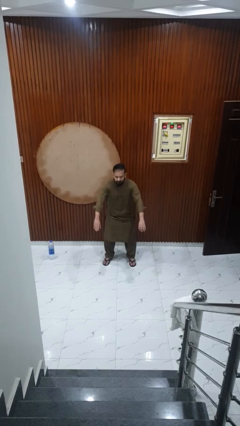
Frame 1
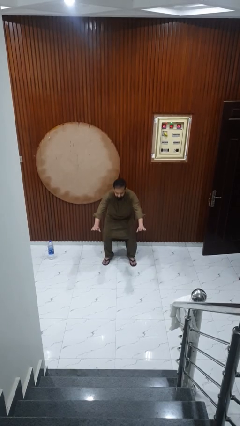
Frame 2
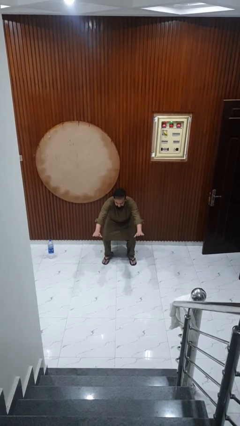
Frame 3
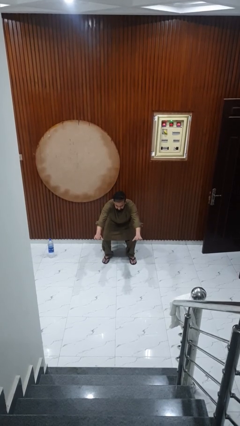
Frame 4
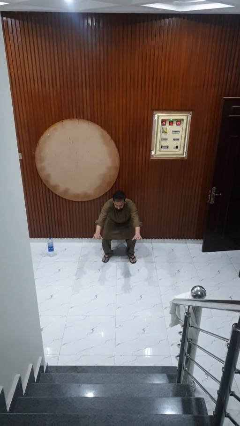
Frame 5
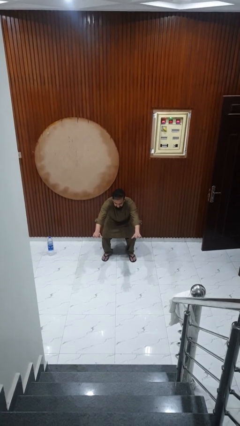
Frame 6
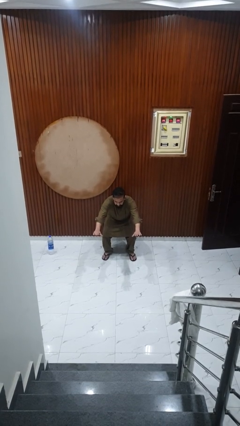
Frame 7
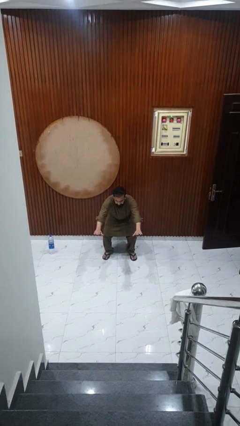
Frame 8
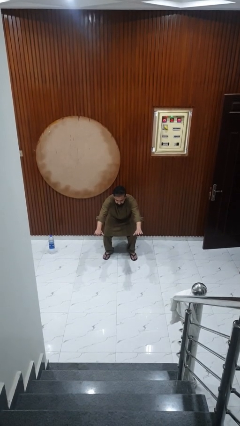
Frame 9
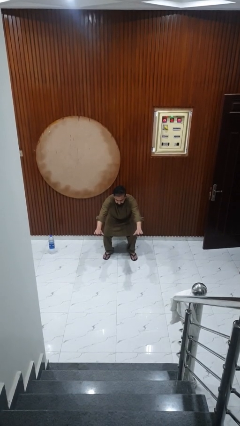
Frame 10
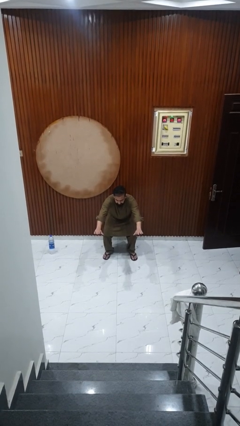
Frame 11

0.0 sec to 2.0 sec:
person squats

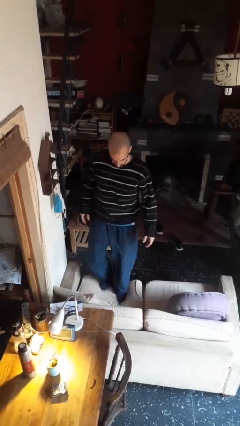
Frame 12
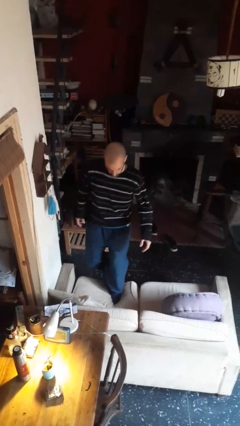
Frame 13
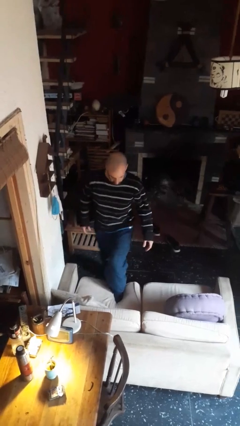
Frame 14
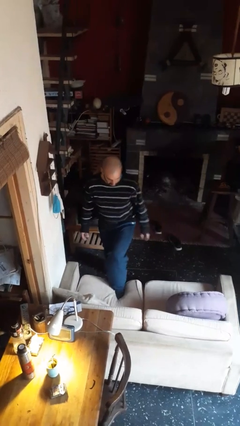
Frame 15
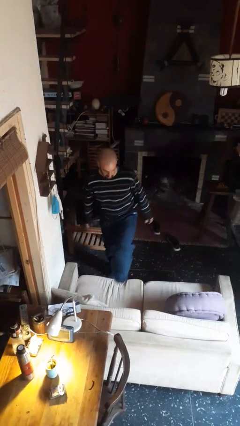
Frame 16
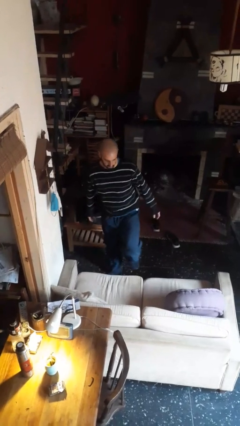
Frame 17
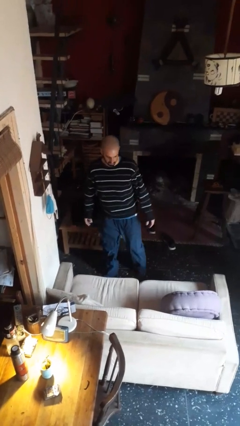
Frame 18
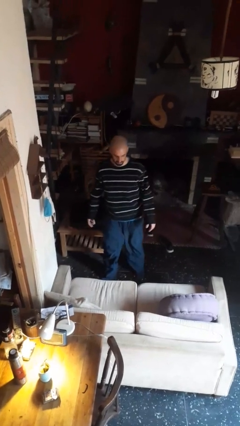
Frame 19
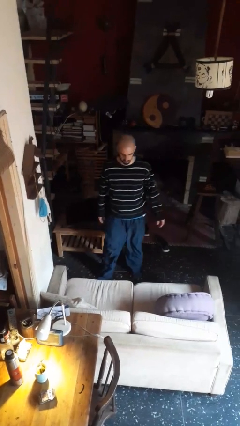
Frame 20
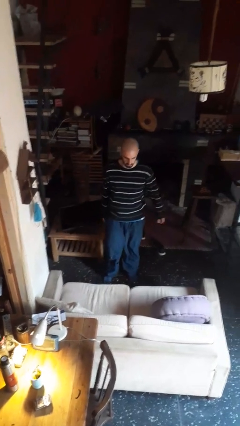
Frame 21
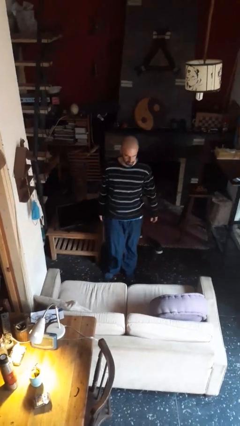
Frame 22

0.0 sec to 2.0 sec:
person climbs off couch

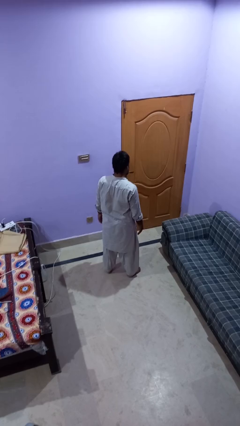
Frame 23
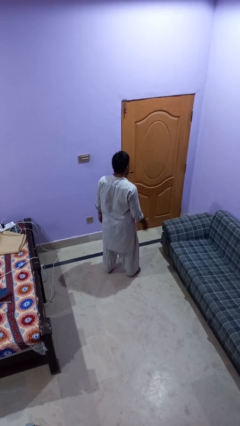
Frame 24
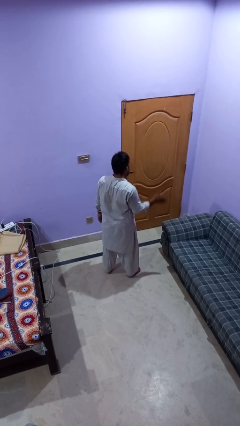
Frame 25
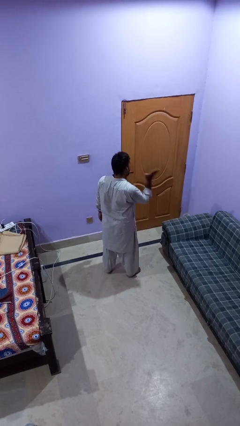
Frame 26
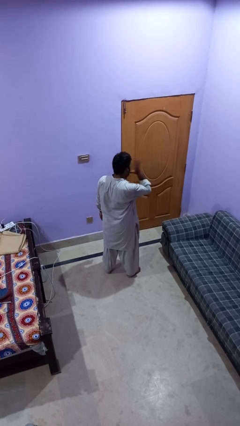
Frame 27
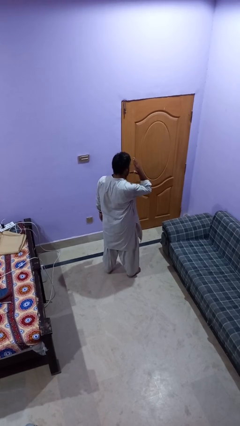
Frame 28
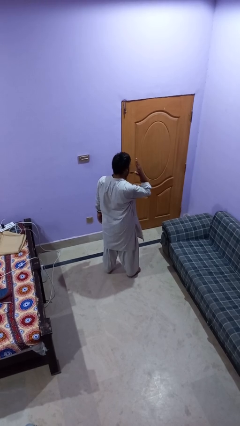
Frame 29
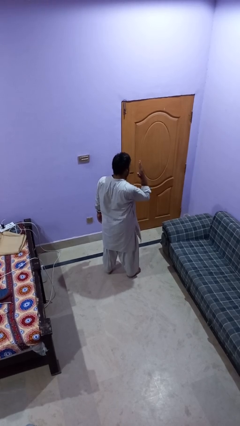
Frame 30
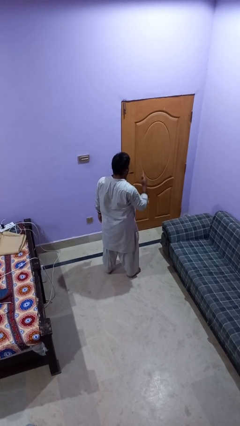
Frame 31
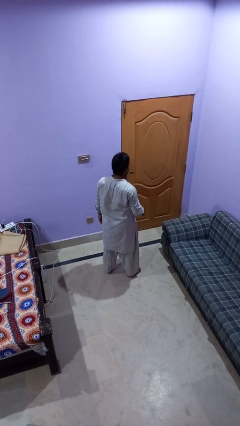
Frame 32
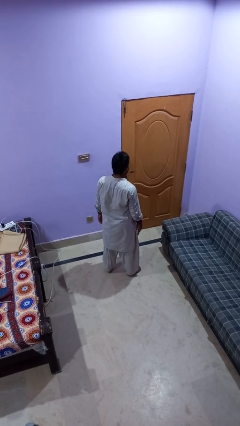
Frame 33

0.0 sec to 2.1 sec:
person swats bug

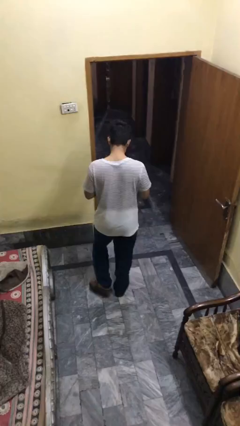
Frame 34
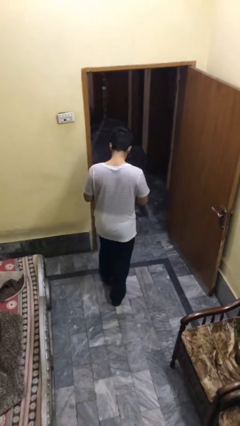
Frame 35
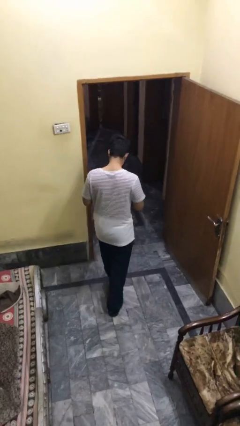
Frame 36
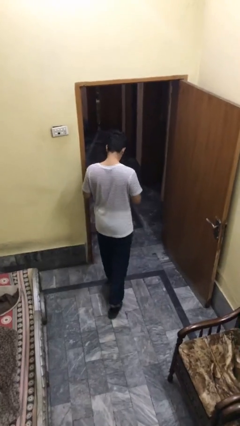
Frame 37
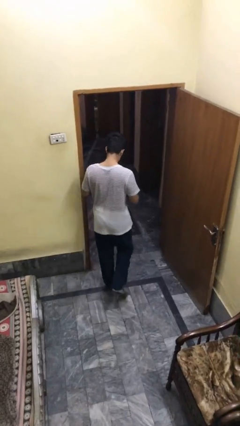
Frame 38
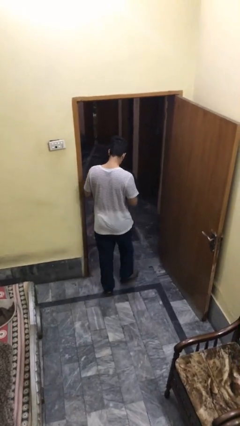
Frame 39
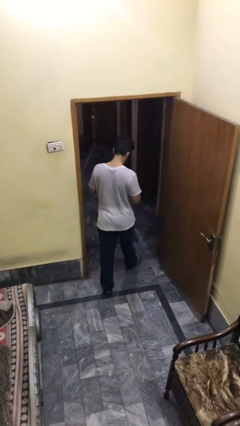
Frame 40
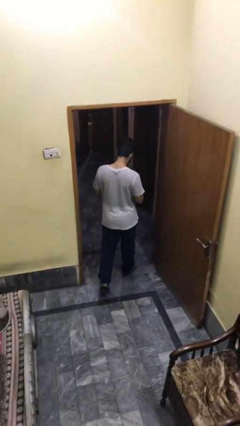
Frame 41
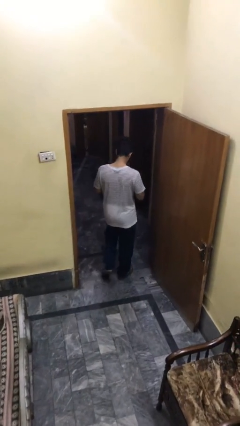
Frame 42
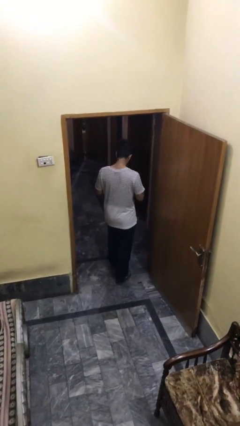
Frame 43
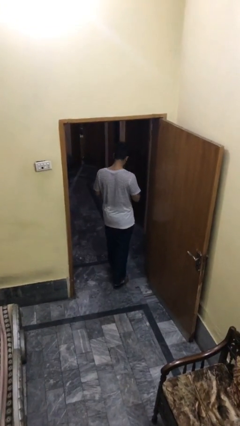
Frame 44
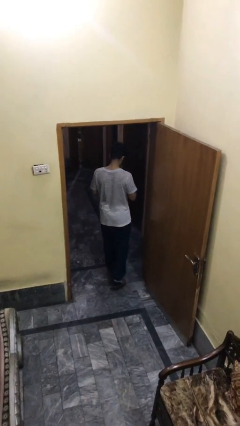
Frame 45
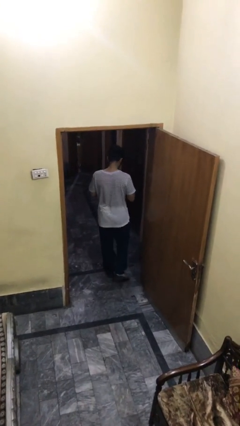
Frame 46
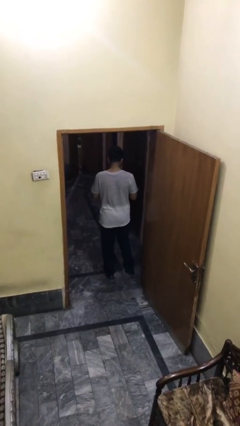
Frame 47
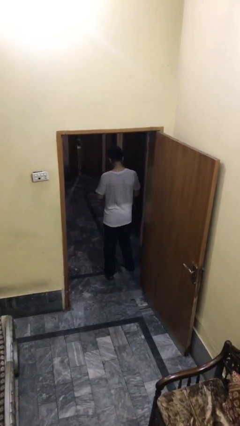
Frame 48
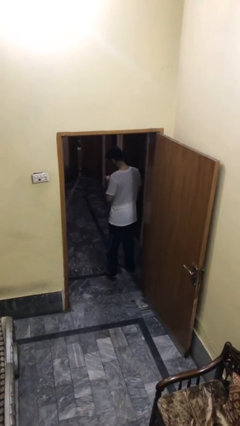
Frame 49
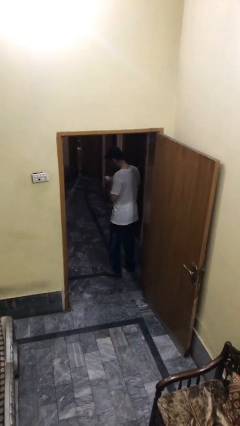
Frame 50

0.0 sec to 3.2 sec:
person exits scene through structure

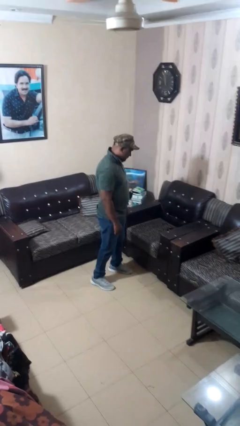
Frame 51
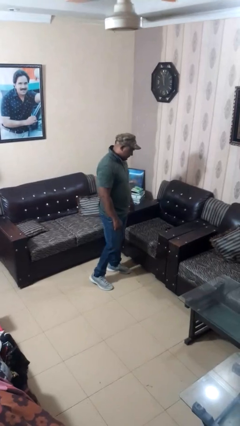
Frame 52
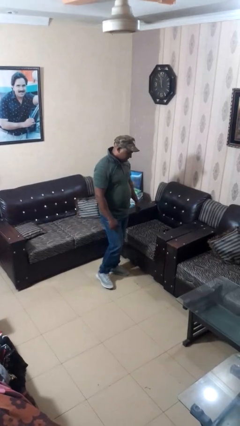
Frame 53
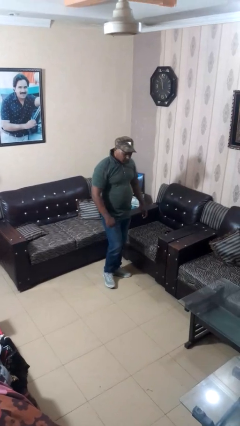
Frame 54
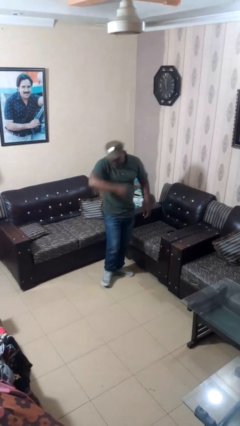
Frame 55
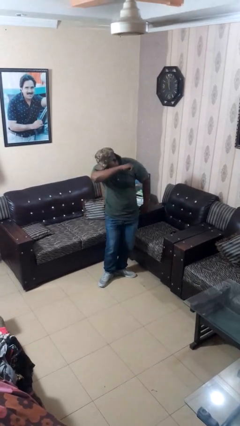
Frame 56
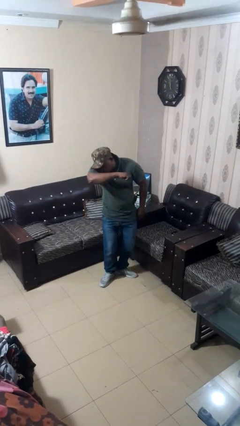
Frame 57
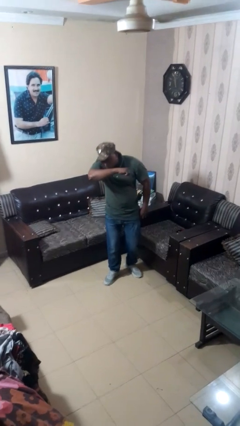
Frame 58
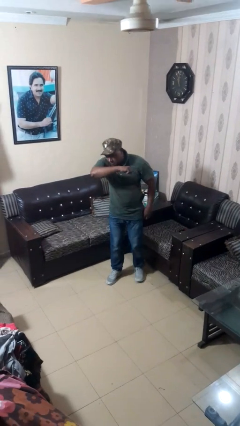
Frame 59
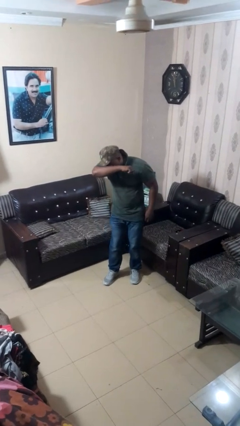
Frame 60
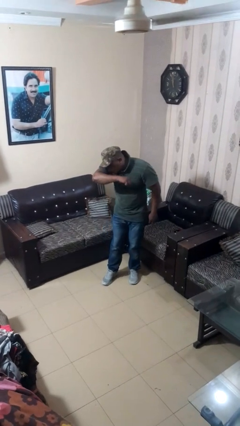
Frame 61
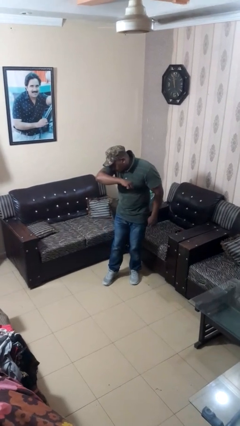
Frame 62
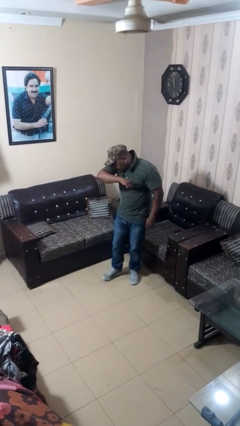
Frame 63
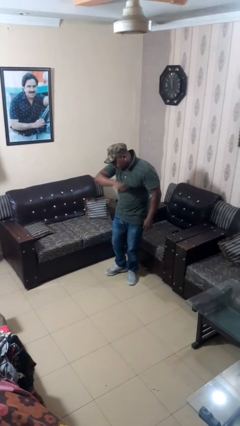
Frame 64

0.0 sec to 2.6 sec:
person sneezes into arm

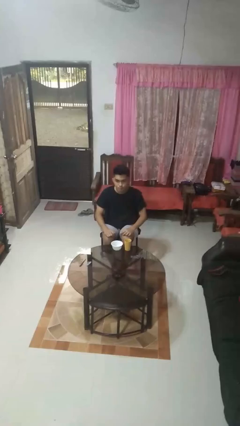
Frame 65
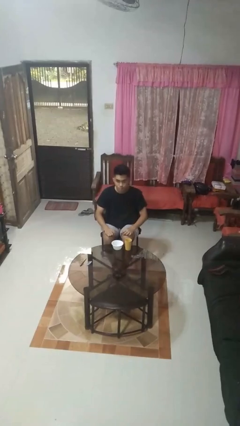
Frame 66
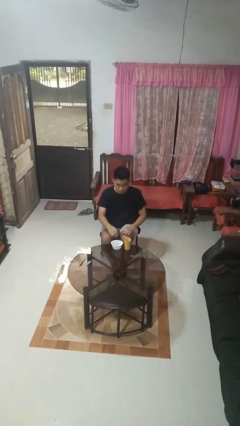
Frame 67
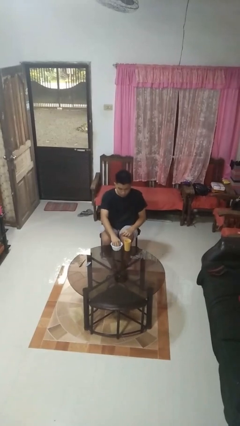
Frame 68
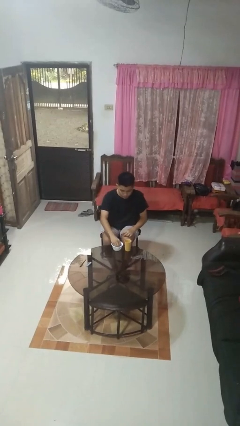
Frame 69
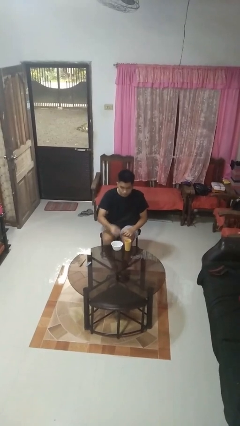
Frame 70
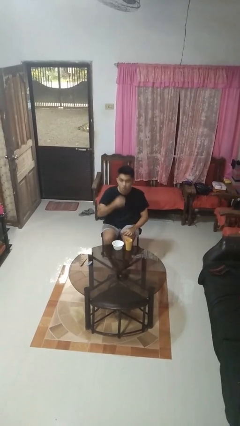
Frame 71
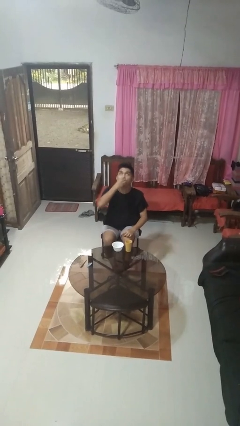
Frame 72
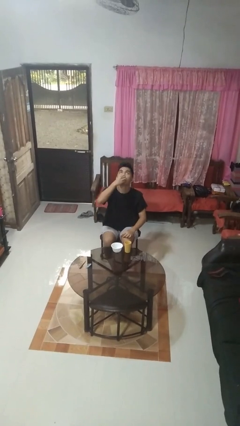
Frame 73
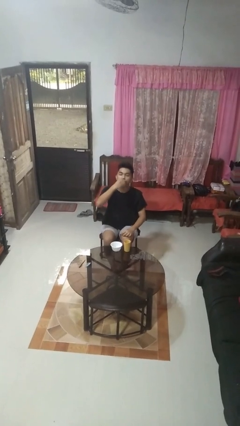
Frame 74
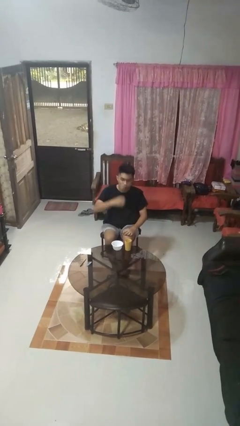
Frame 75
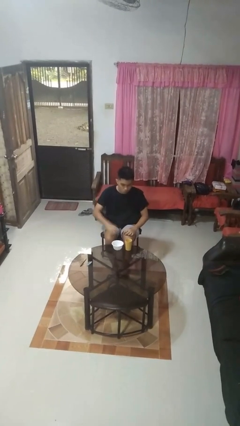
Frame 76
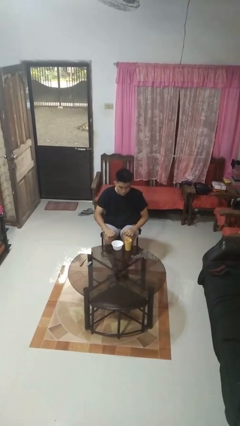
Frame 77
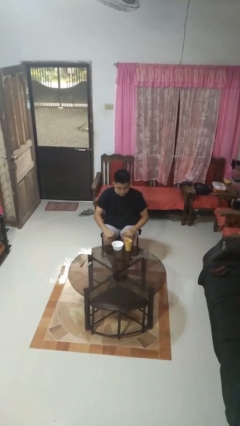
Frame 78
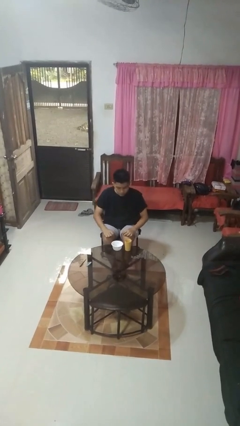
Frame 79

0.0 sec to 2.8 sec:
person takes medicine pills

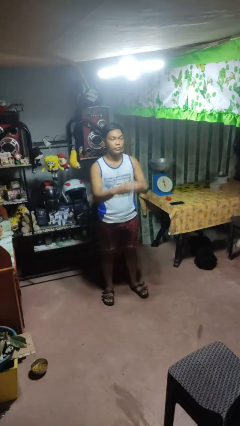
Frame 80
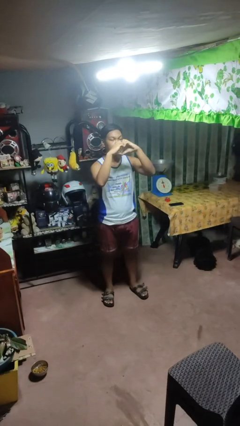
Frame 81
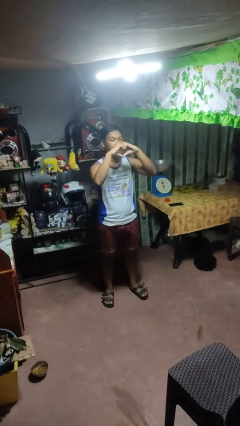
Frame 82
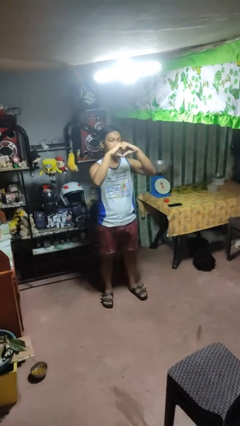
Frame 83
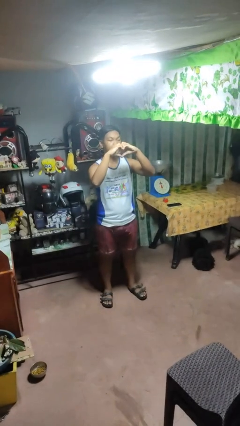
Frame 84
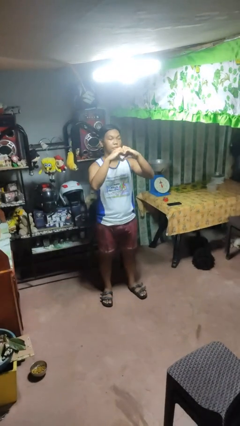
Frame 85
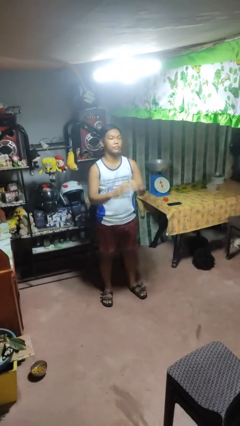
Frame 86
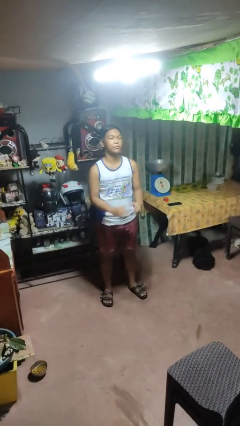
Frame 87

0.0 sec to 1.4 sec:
person gestures heart

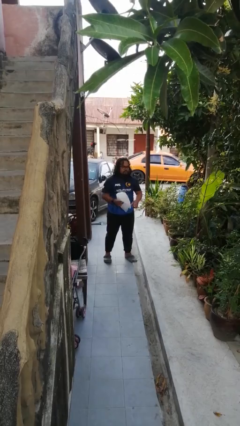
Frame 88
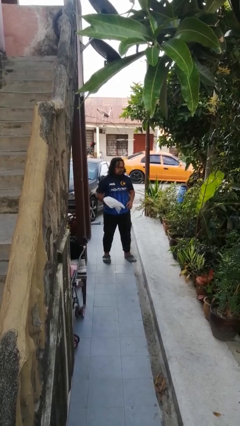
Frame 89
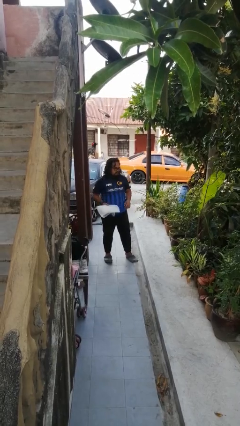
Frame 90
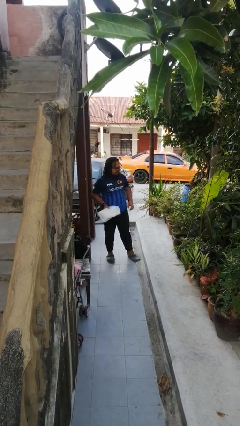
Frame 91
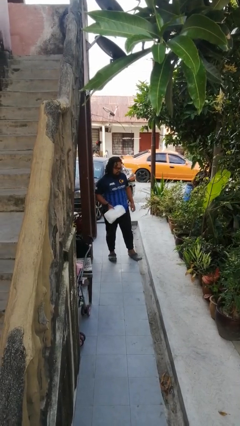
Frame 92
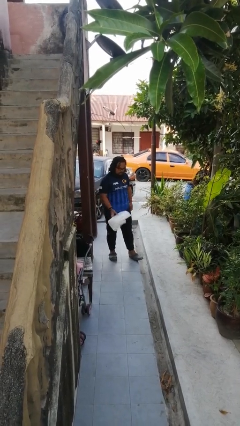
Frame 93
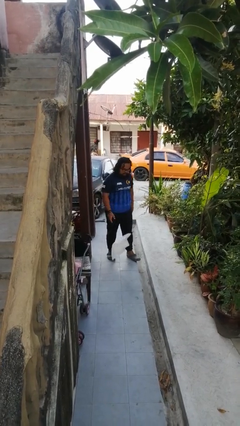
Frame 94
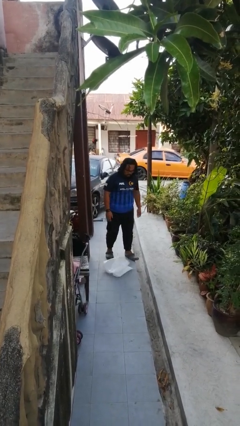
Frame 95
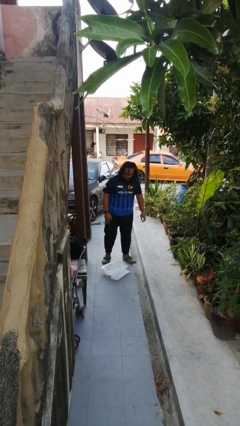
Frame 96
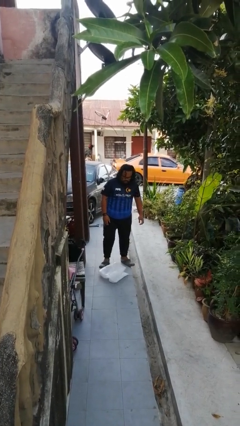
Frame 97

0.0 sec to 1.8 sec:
person drops object
